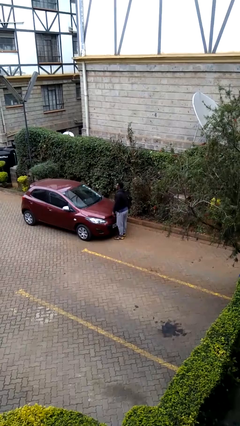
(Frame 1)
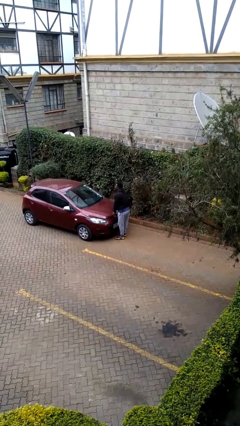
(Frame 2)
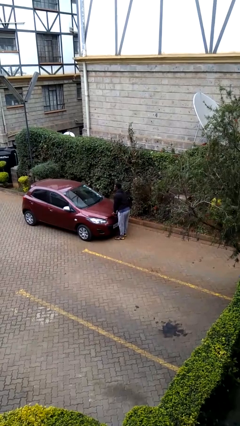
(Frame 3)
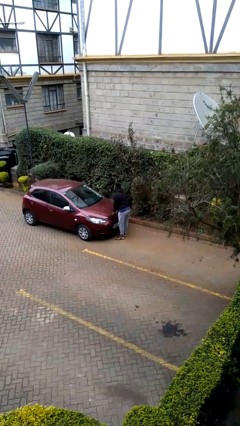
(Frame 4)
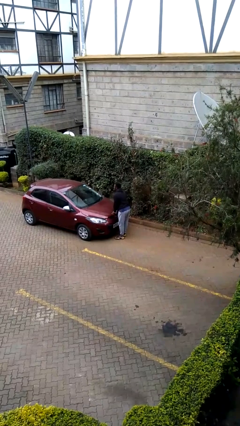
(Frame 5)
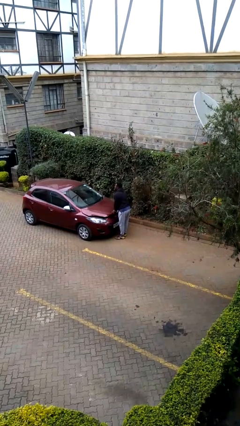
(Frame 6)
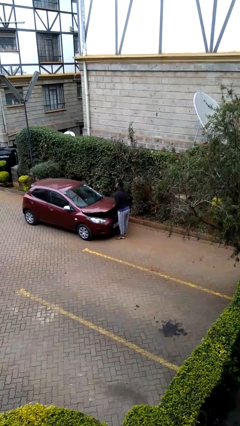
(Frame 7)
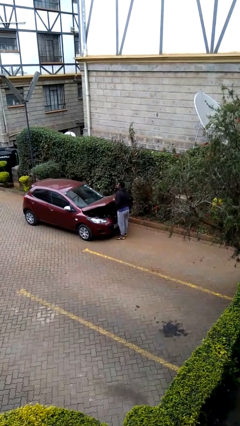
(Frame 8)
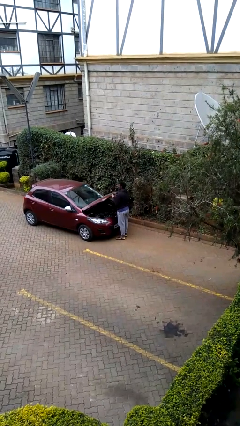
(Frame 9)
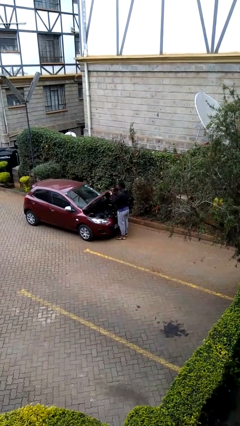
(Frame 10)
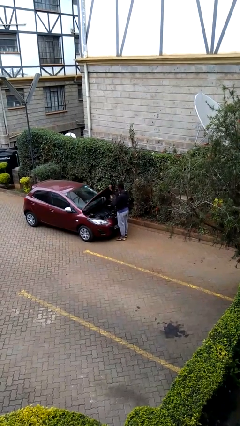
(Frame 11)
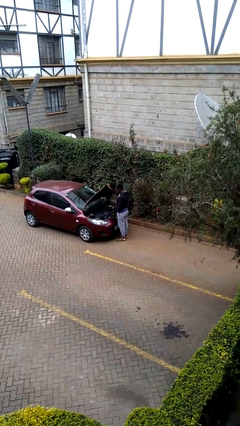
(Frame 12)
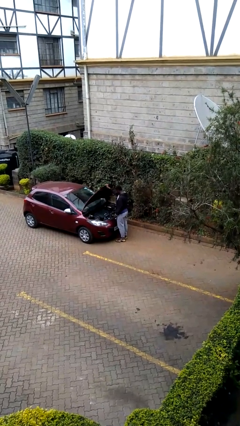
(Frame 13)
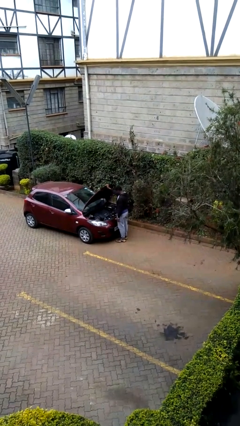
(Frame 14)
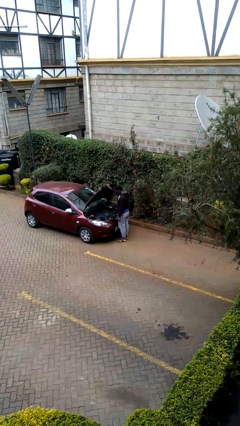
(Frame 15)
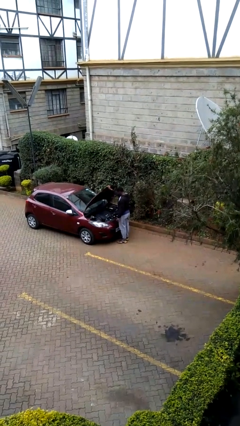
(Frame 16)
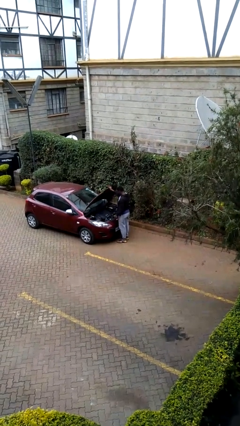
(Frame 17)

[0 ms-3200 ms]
person opens car hood

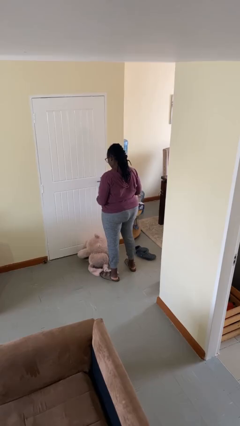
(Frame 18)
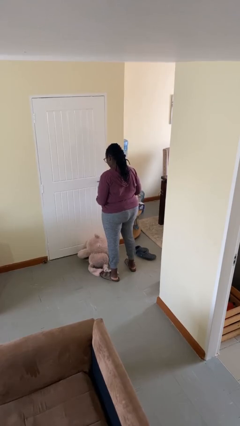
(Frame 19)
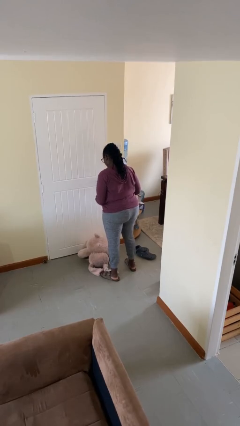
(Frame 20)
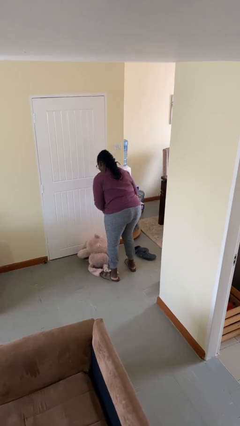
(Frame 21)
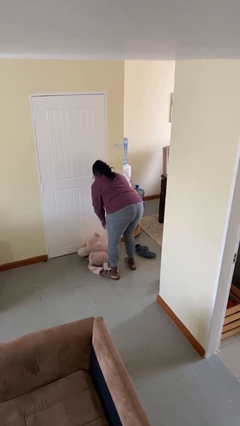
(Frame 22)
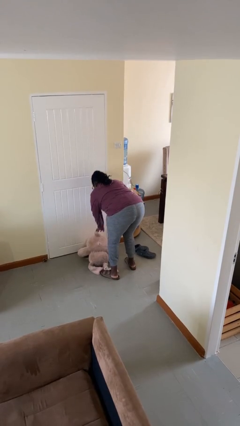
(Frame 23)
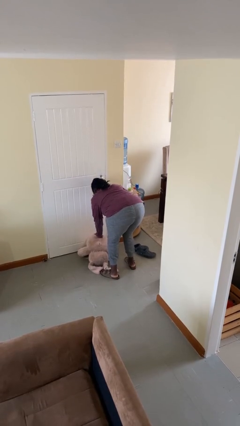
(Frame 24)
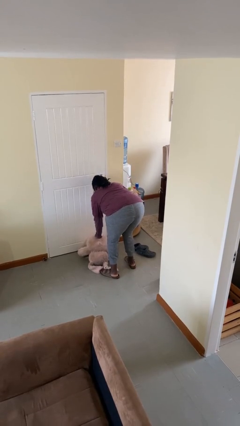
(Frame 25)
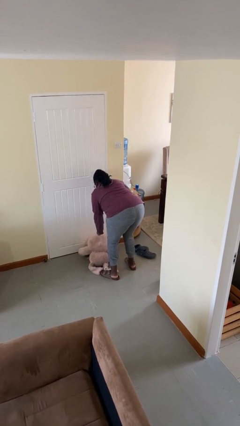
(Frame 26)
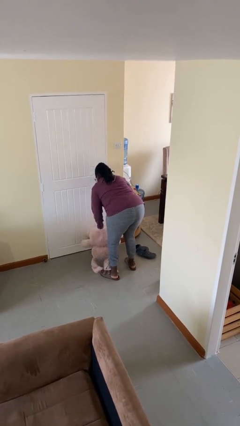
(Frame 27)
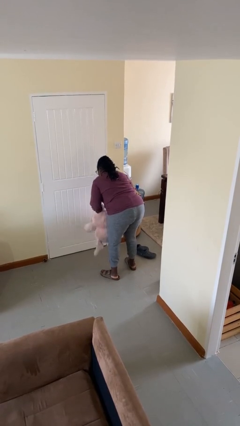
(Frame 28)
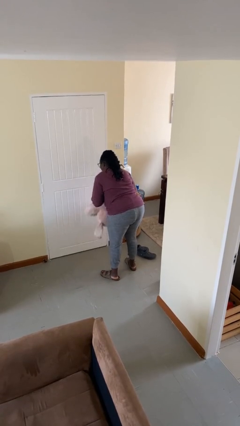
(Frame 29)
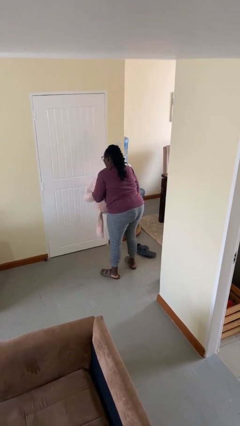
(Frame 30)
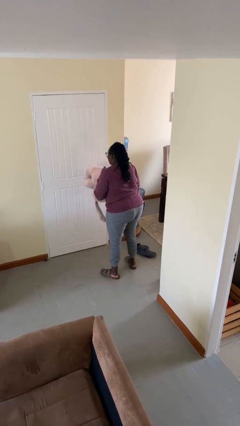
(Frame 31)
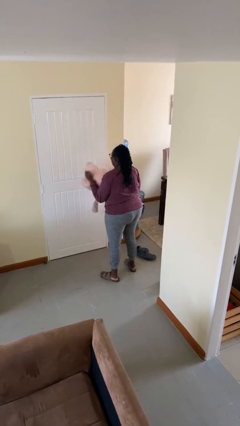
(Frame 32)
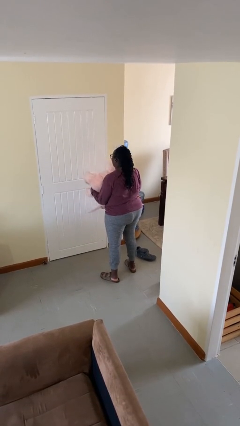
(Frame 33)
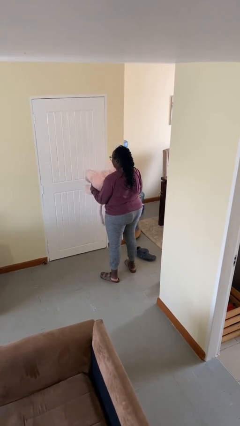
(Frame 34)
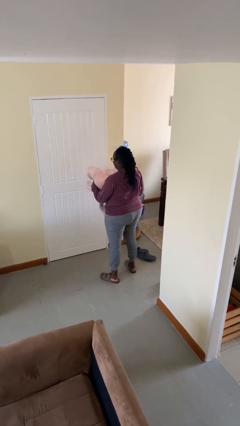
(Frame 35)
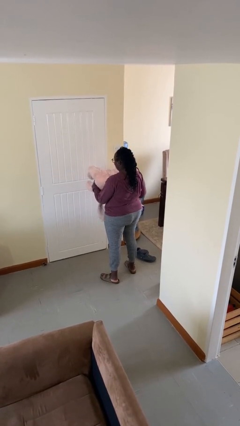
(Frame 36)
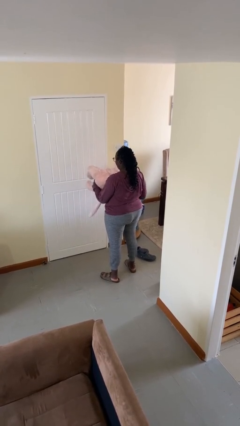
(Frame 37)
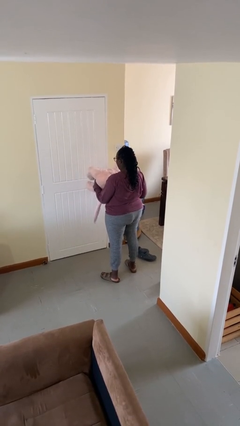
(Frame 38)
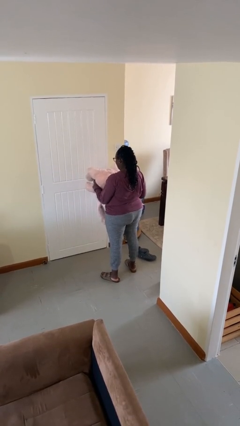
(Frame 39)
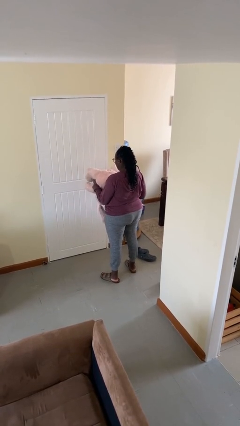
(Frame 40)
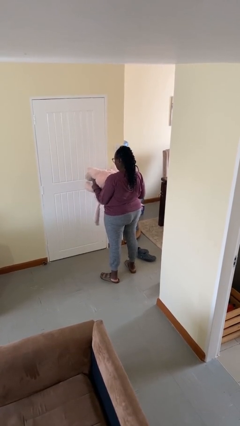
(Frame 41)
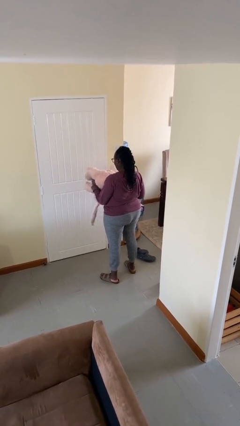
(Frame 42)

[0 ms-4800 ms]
person picks up object from floor

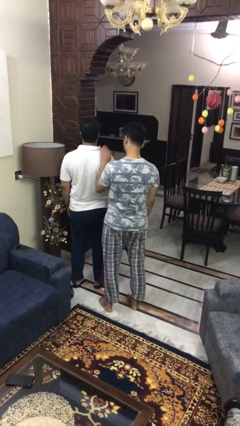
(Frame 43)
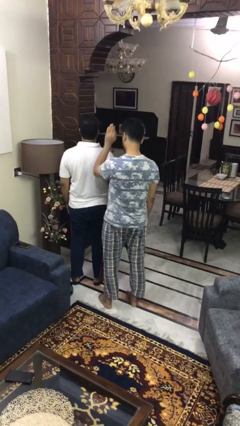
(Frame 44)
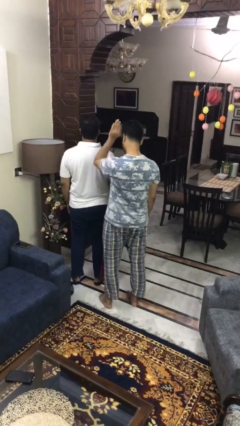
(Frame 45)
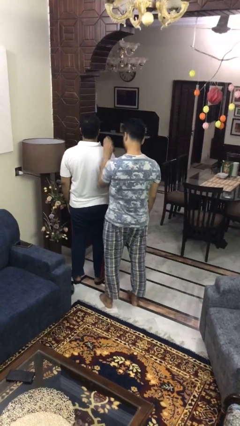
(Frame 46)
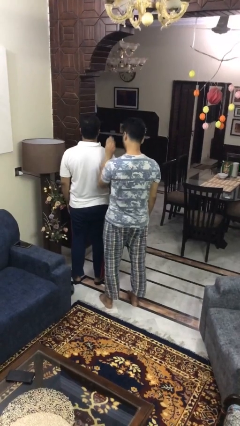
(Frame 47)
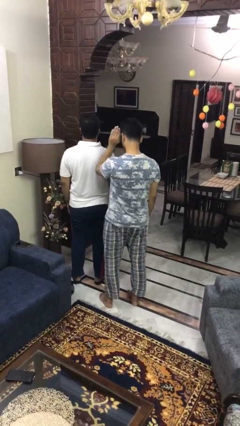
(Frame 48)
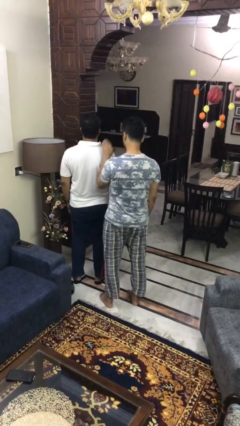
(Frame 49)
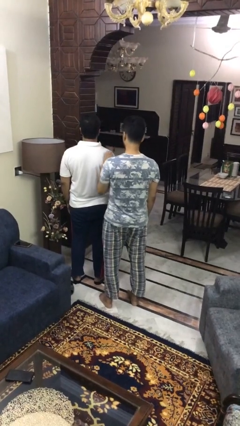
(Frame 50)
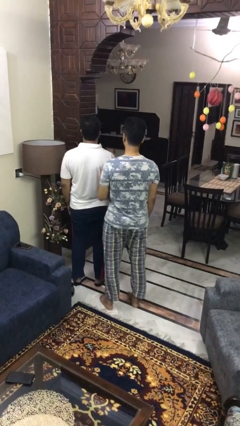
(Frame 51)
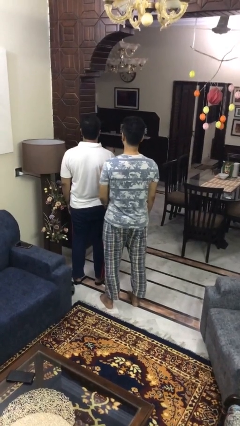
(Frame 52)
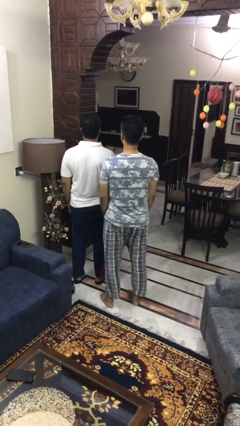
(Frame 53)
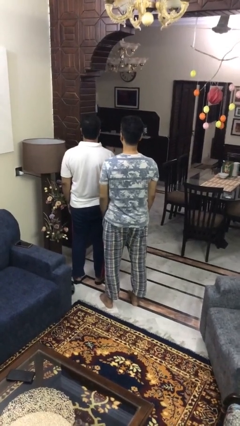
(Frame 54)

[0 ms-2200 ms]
person pounds shoulders of person

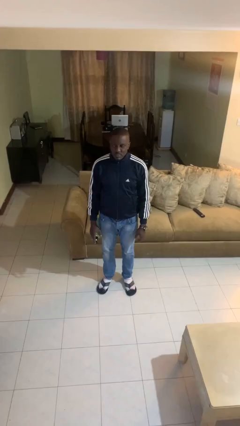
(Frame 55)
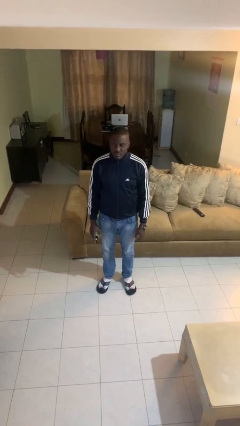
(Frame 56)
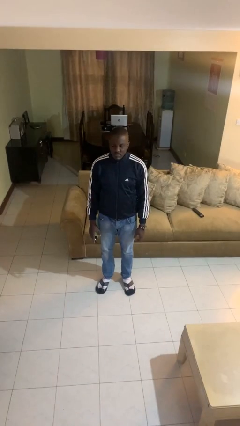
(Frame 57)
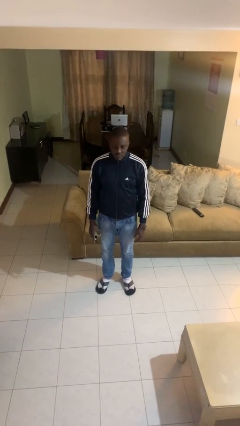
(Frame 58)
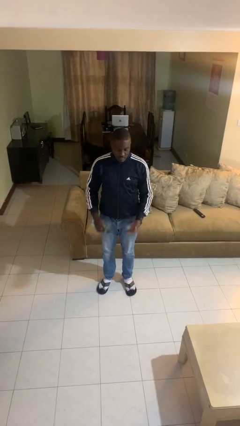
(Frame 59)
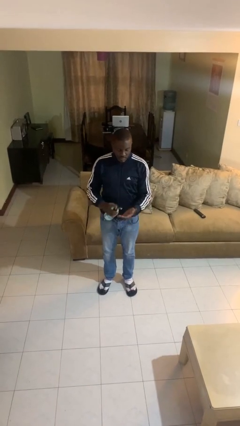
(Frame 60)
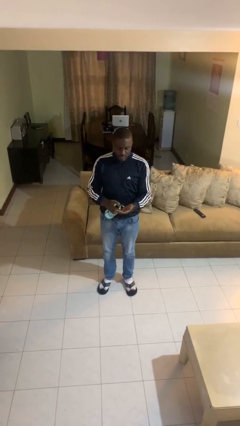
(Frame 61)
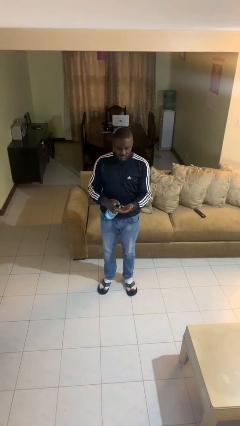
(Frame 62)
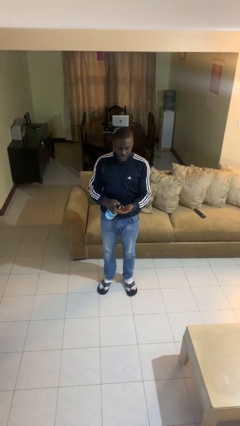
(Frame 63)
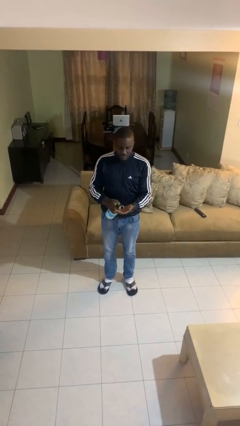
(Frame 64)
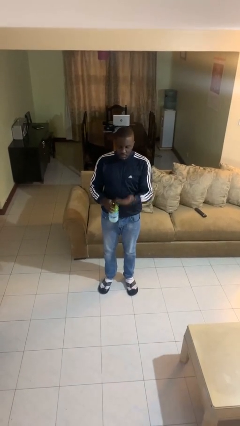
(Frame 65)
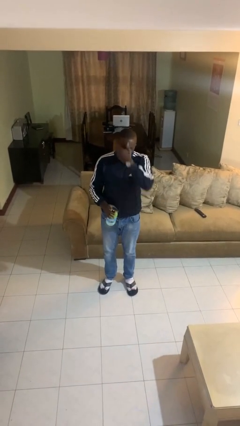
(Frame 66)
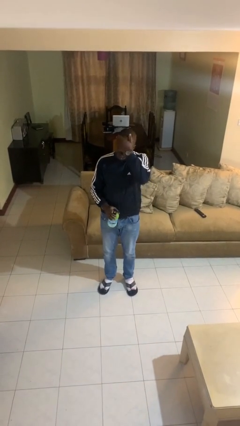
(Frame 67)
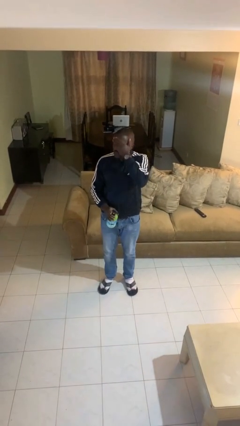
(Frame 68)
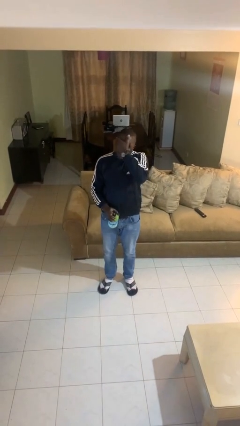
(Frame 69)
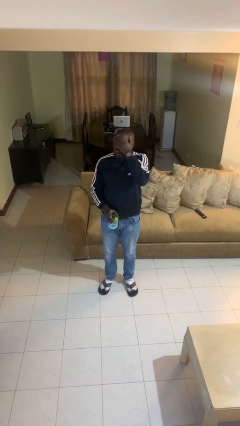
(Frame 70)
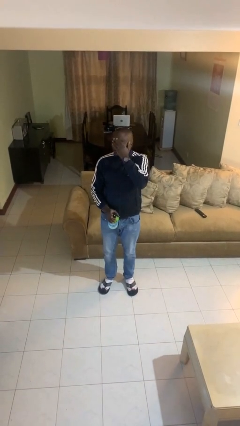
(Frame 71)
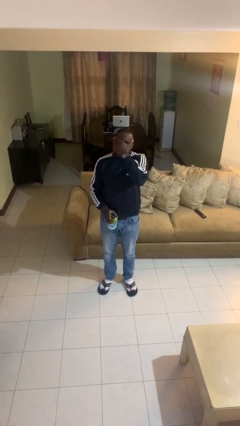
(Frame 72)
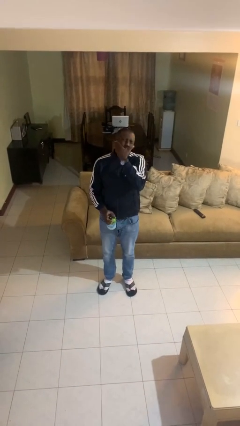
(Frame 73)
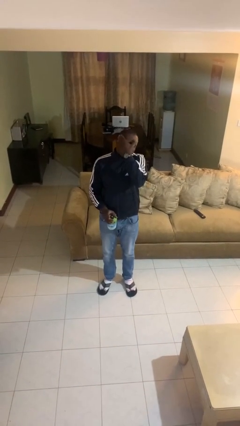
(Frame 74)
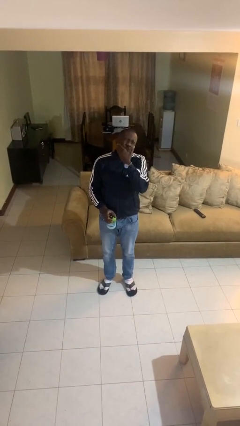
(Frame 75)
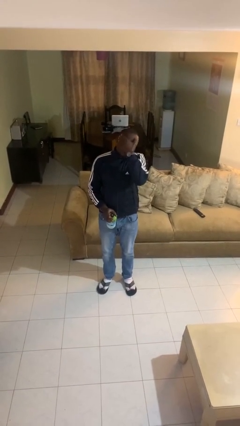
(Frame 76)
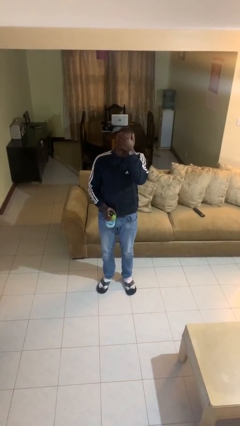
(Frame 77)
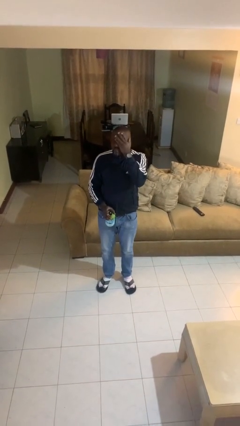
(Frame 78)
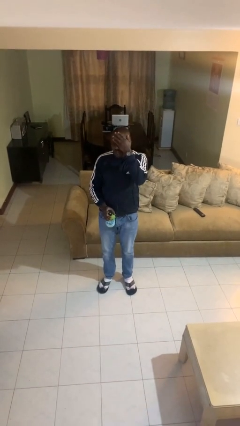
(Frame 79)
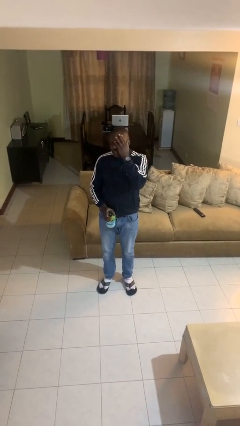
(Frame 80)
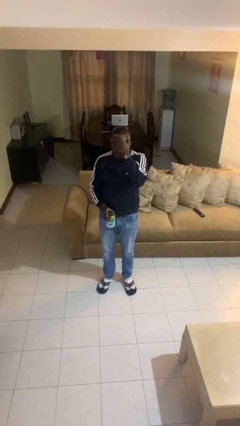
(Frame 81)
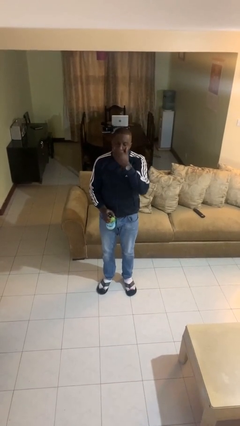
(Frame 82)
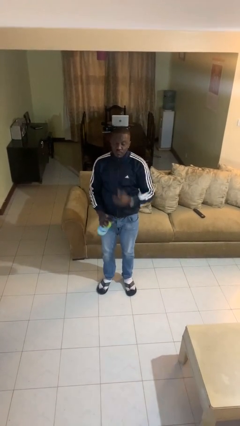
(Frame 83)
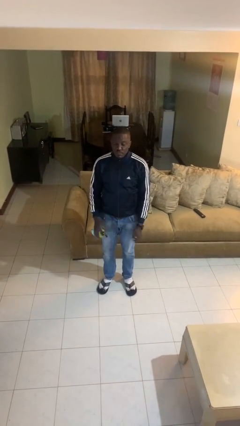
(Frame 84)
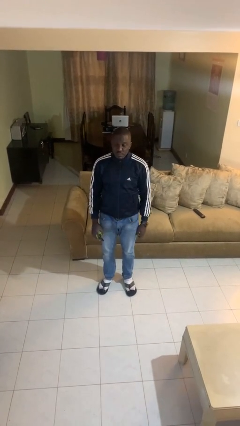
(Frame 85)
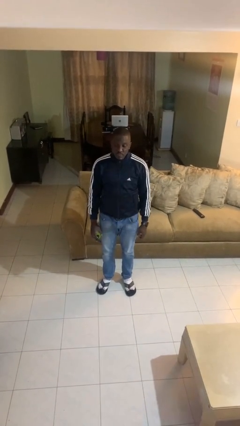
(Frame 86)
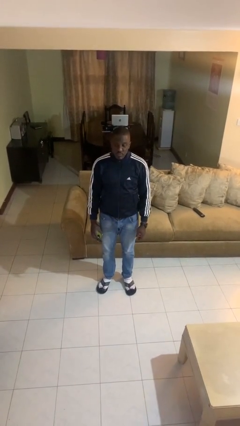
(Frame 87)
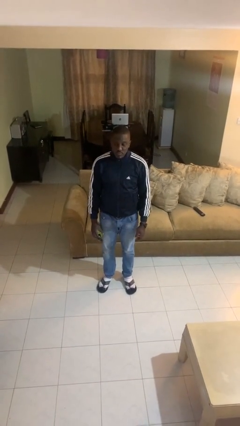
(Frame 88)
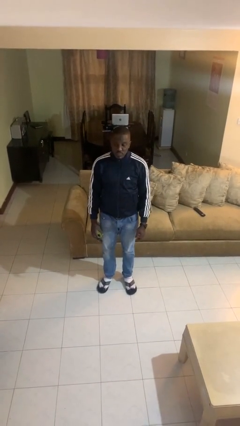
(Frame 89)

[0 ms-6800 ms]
person applies facial moisturizer

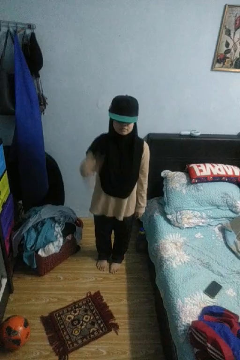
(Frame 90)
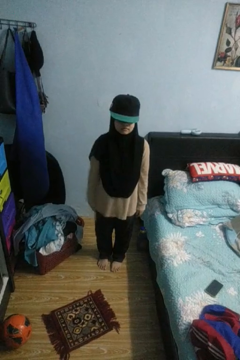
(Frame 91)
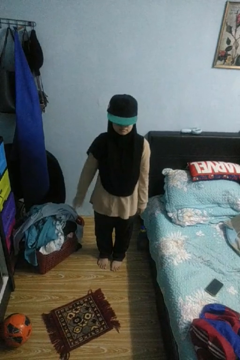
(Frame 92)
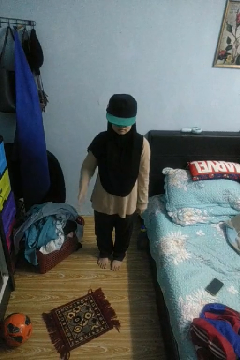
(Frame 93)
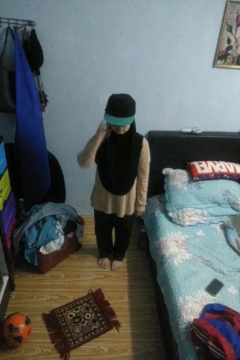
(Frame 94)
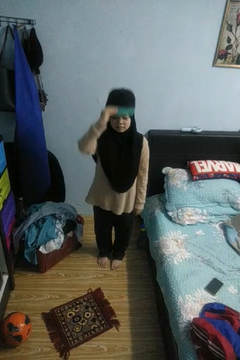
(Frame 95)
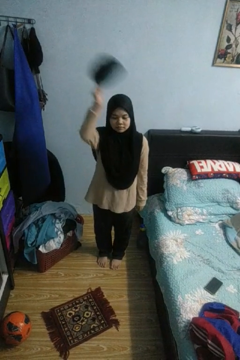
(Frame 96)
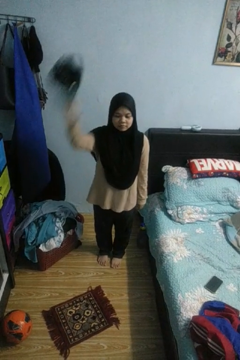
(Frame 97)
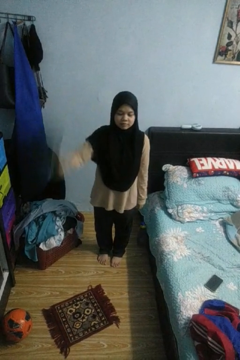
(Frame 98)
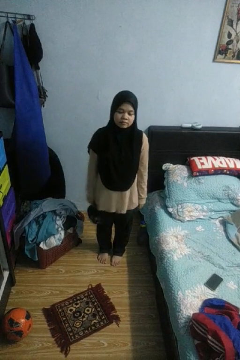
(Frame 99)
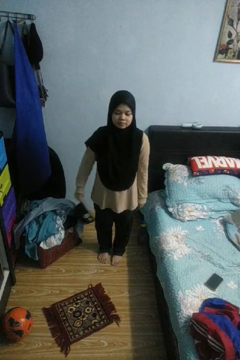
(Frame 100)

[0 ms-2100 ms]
person takes off hat
